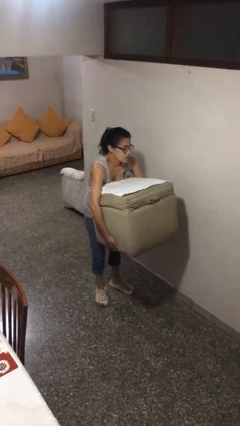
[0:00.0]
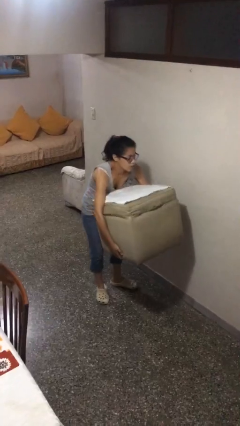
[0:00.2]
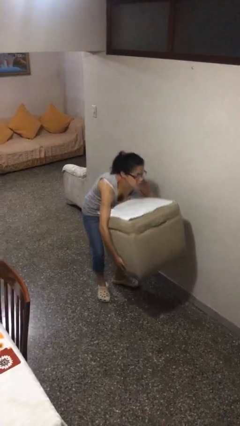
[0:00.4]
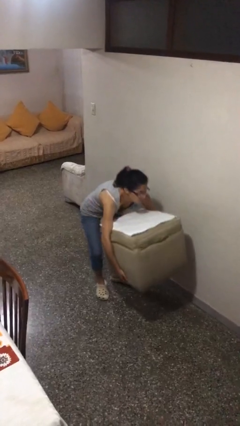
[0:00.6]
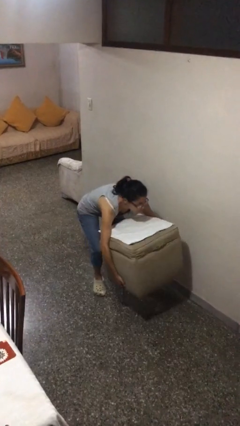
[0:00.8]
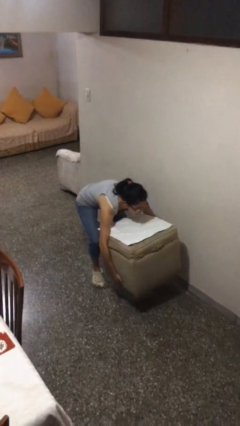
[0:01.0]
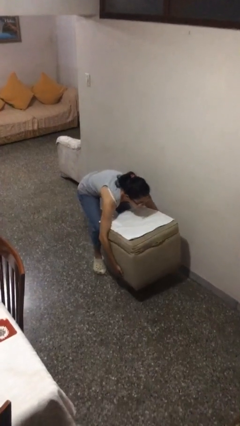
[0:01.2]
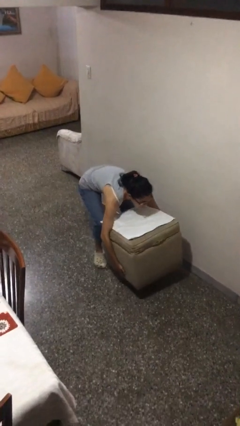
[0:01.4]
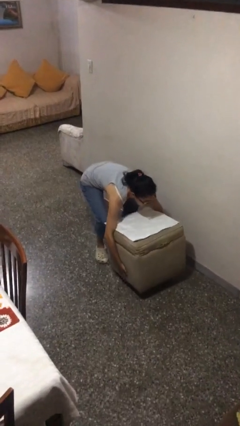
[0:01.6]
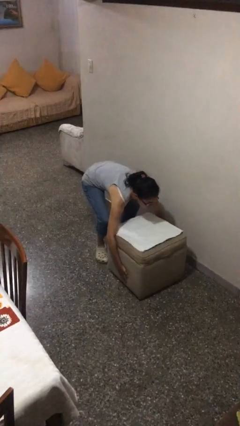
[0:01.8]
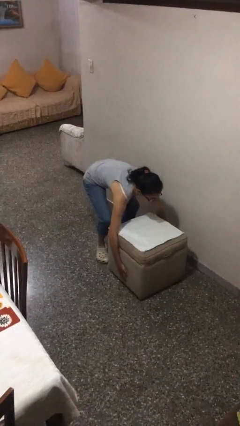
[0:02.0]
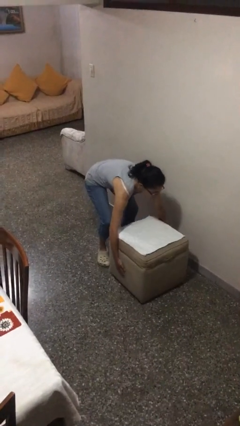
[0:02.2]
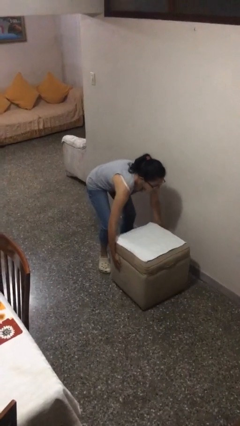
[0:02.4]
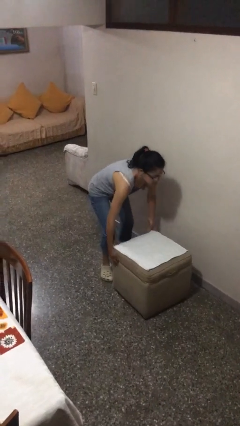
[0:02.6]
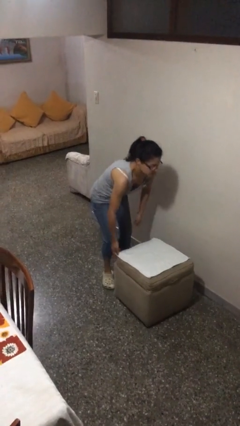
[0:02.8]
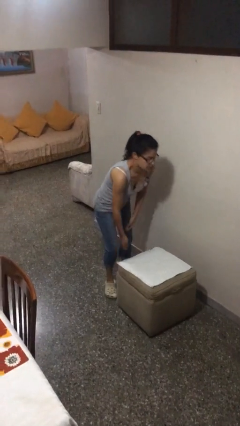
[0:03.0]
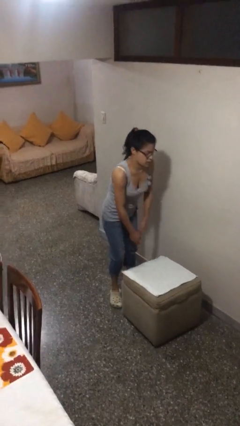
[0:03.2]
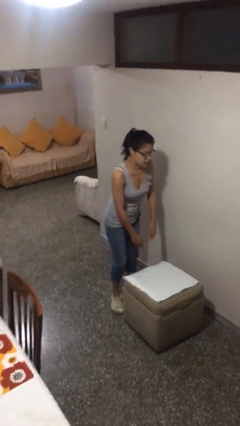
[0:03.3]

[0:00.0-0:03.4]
person puts down object on floor

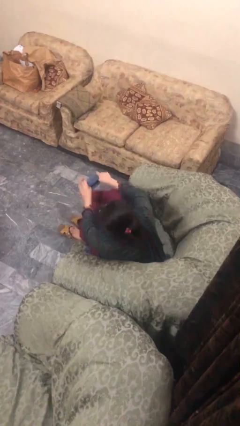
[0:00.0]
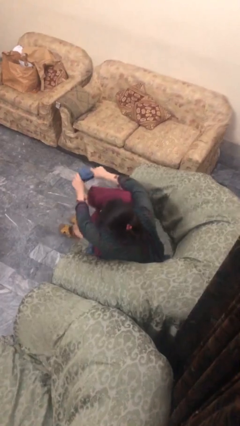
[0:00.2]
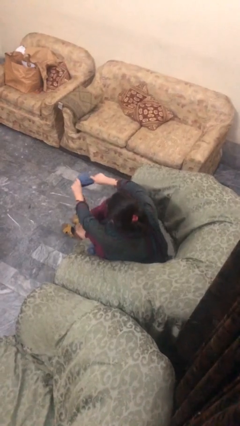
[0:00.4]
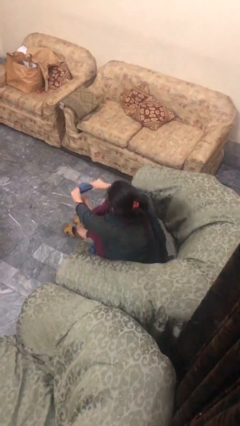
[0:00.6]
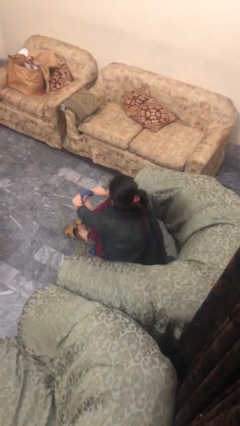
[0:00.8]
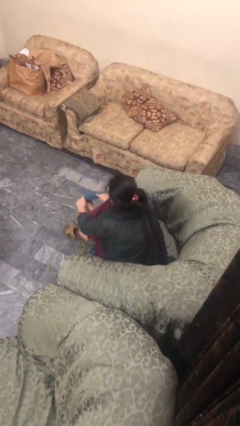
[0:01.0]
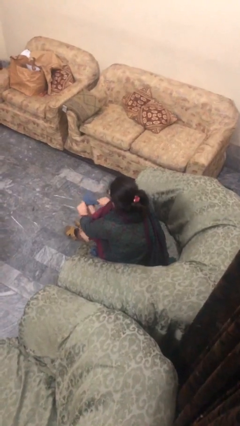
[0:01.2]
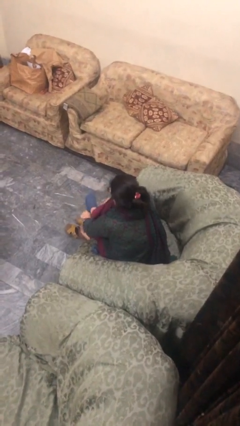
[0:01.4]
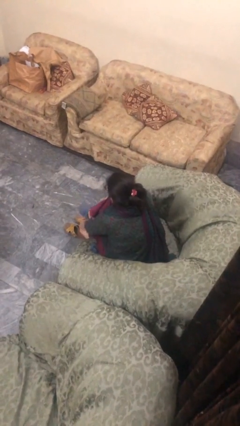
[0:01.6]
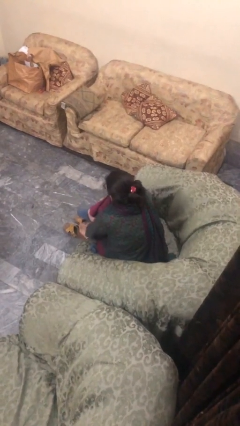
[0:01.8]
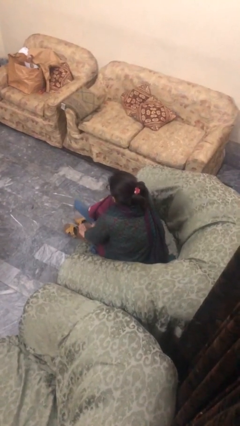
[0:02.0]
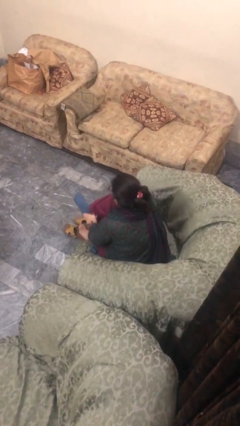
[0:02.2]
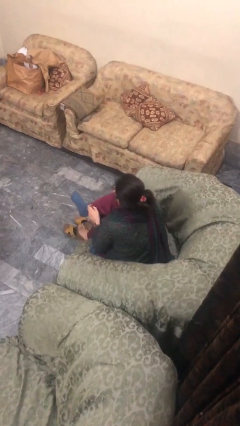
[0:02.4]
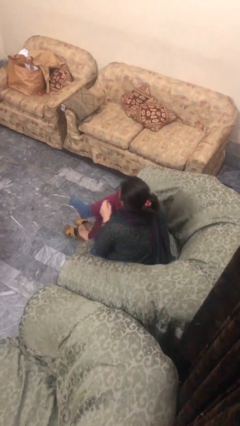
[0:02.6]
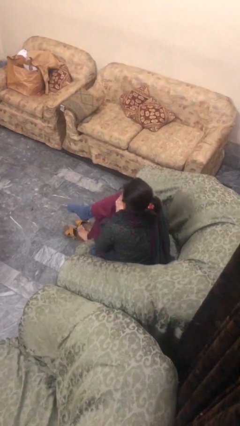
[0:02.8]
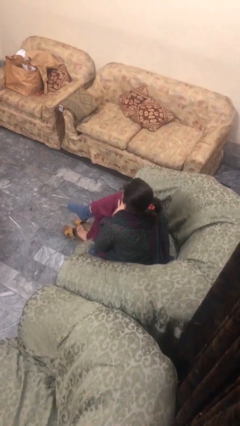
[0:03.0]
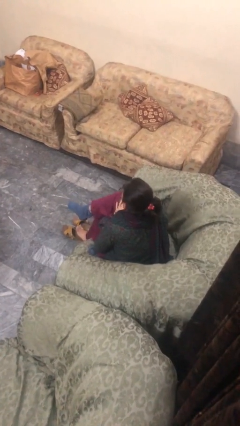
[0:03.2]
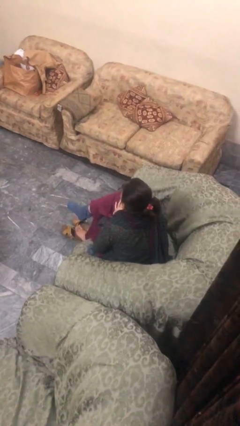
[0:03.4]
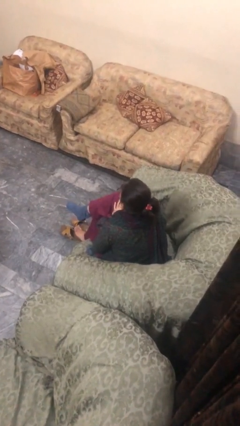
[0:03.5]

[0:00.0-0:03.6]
person puts on socks

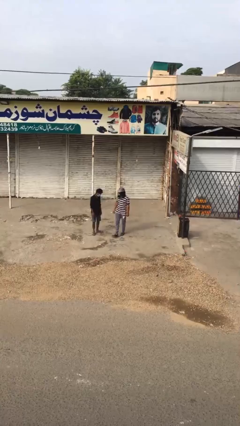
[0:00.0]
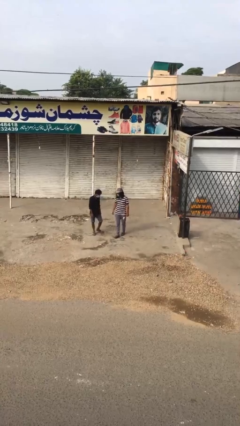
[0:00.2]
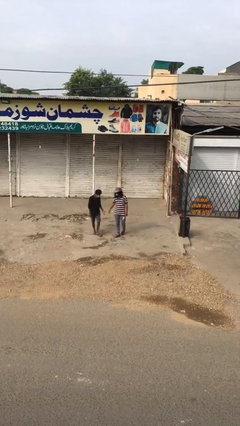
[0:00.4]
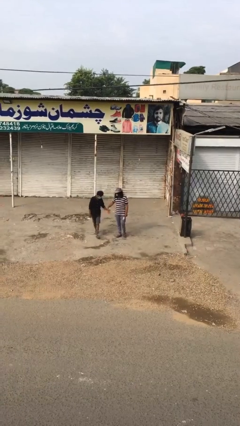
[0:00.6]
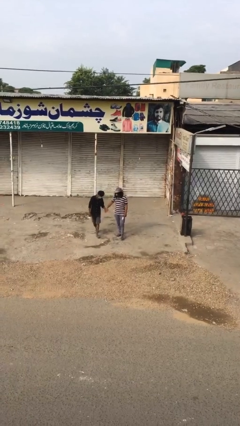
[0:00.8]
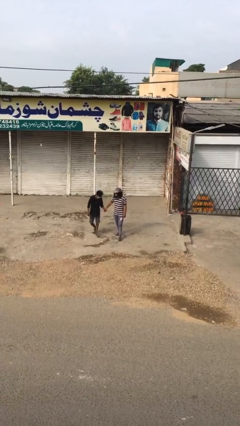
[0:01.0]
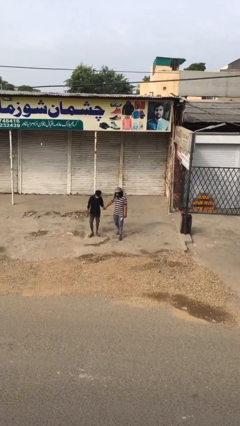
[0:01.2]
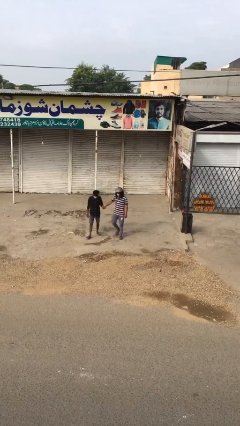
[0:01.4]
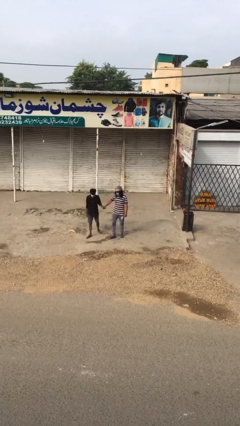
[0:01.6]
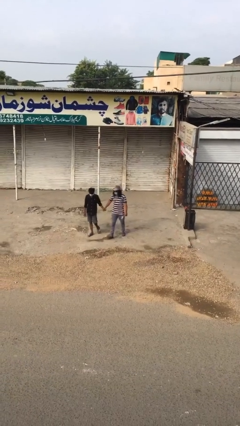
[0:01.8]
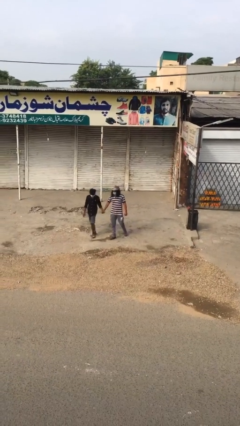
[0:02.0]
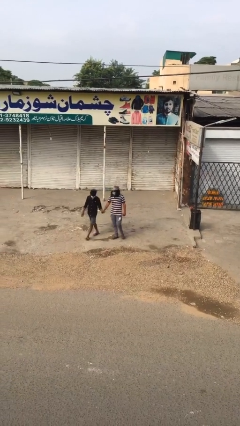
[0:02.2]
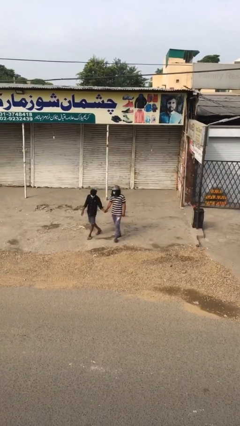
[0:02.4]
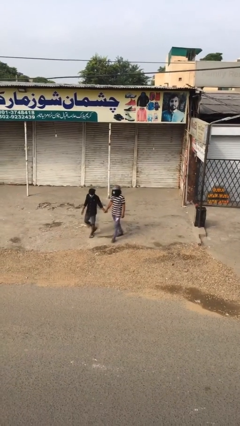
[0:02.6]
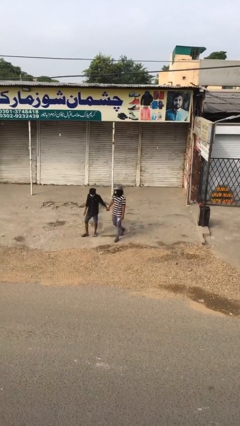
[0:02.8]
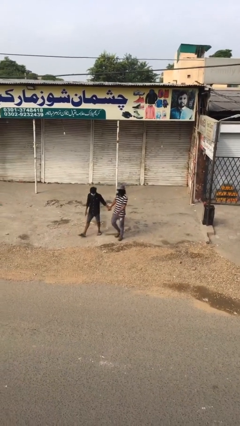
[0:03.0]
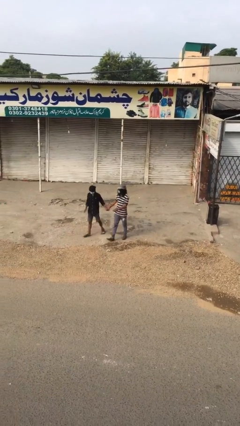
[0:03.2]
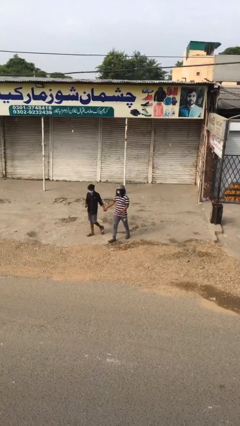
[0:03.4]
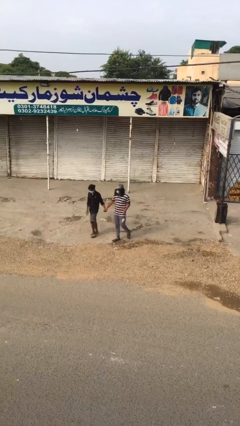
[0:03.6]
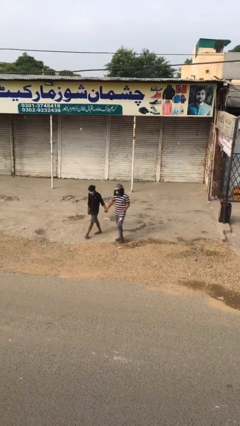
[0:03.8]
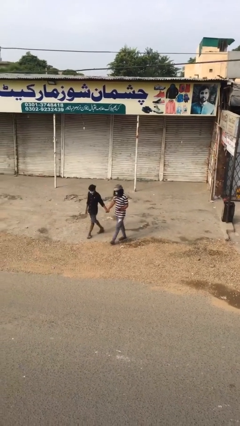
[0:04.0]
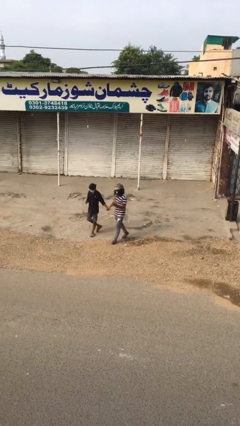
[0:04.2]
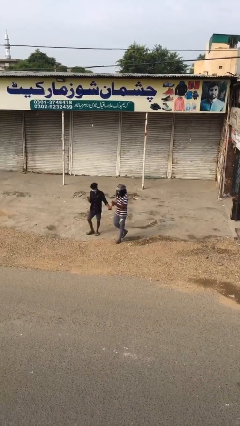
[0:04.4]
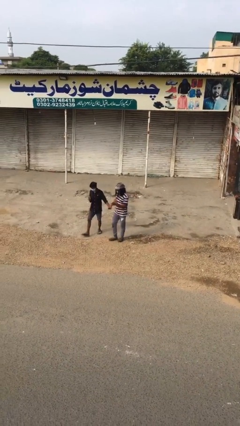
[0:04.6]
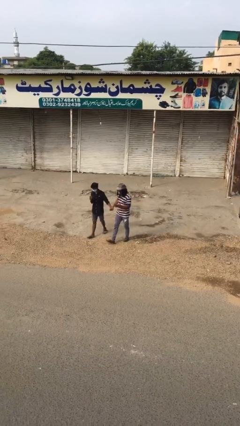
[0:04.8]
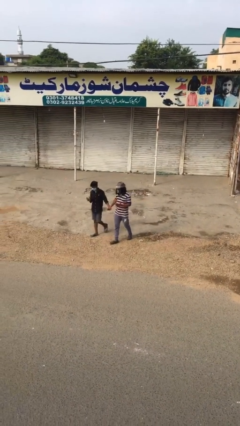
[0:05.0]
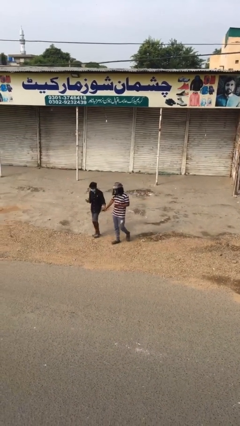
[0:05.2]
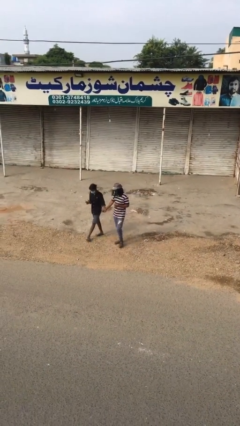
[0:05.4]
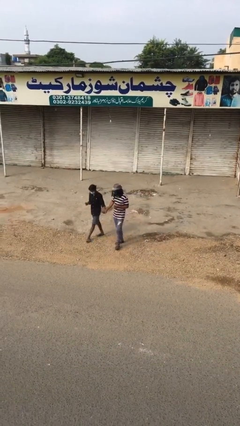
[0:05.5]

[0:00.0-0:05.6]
person holds hand

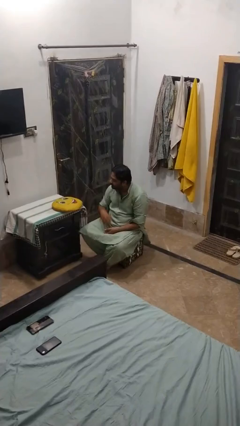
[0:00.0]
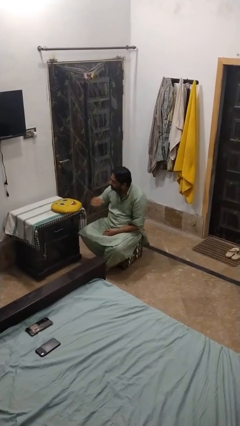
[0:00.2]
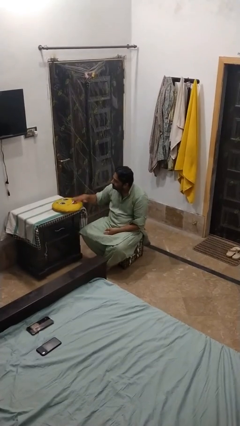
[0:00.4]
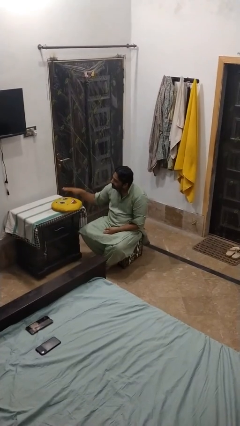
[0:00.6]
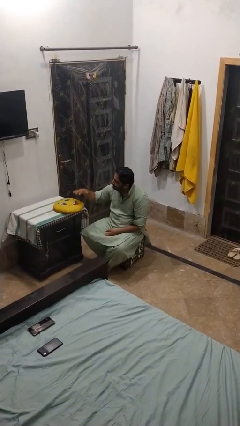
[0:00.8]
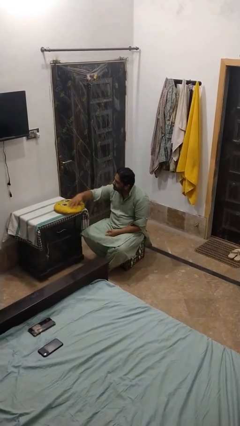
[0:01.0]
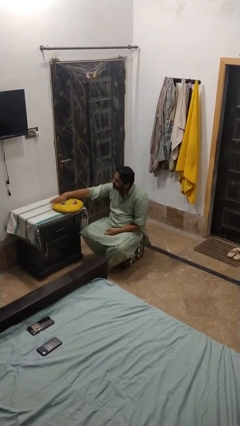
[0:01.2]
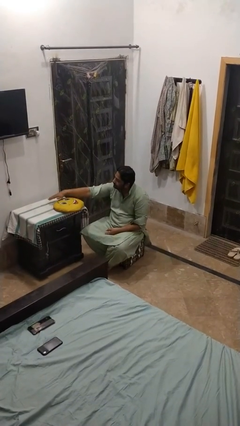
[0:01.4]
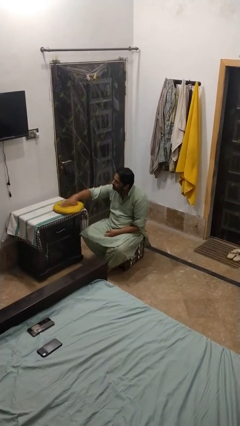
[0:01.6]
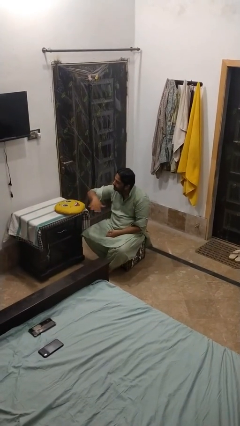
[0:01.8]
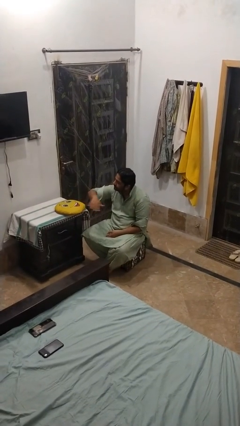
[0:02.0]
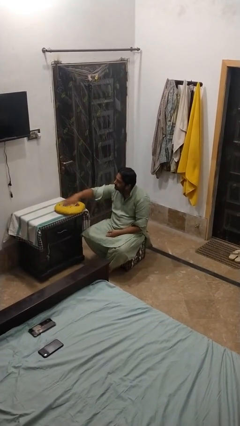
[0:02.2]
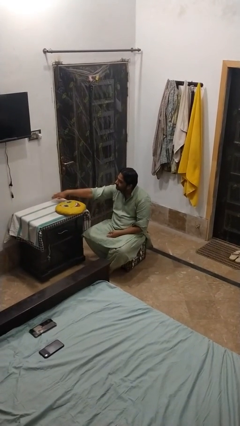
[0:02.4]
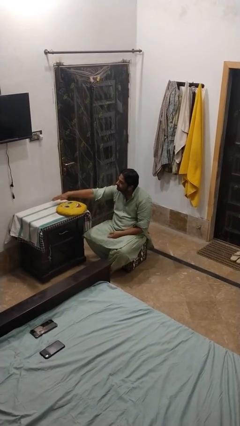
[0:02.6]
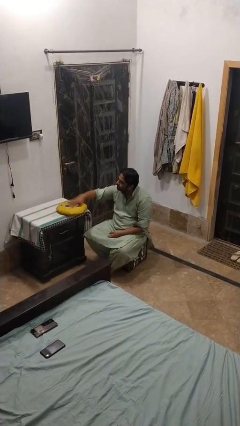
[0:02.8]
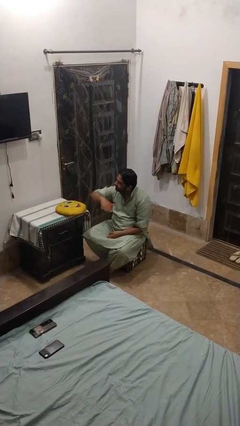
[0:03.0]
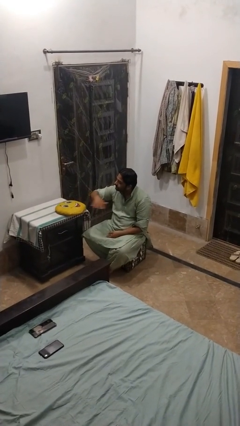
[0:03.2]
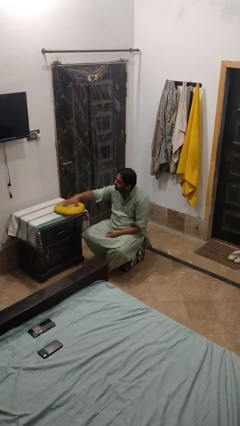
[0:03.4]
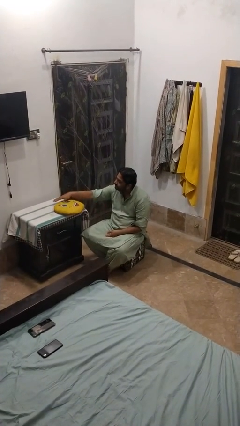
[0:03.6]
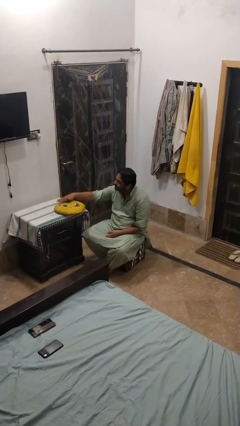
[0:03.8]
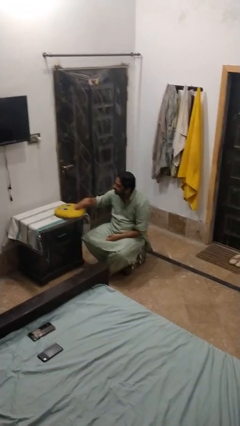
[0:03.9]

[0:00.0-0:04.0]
person waves hand over object

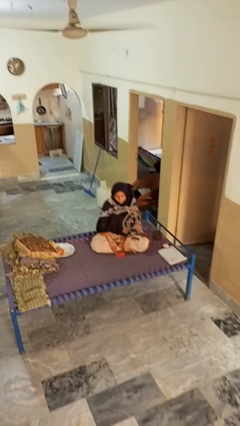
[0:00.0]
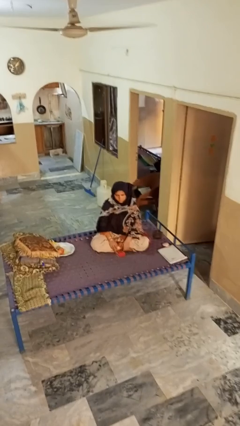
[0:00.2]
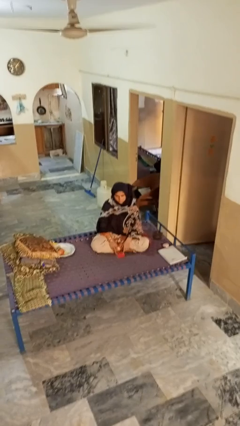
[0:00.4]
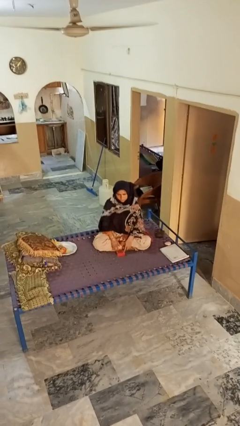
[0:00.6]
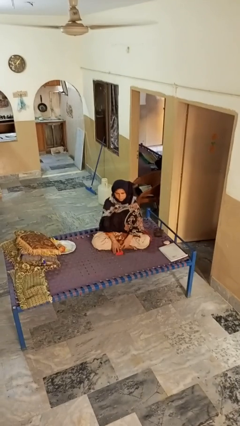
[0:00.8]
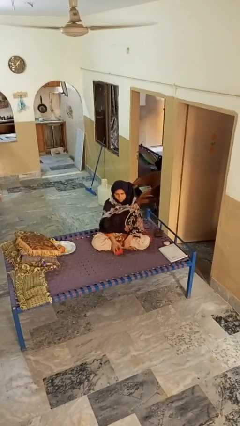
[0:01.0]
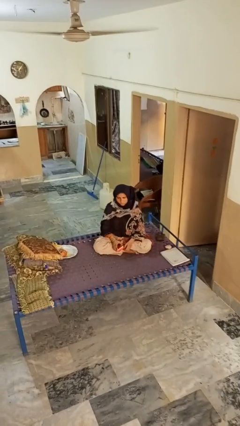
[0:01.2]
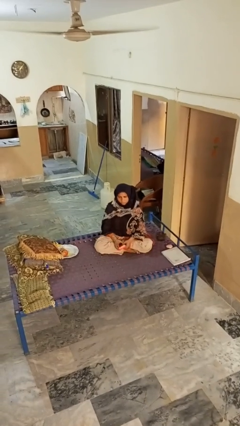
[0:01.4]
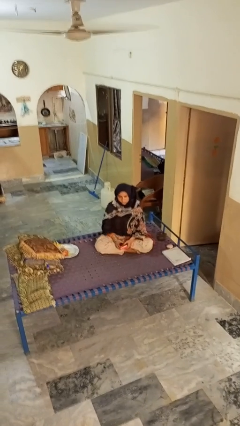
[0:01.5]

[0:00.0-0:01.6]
person picks up object from floor
